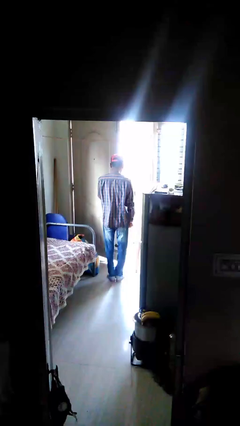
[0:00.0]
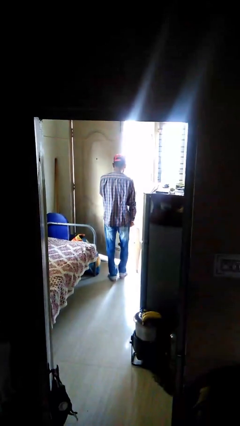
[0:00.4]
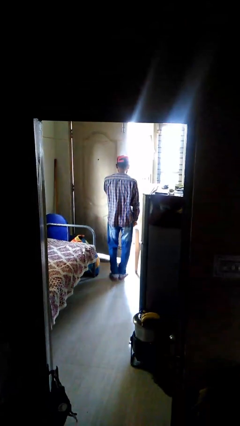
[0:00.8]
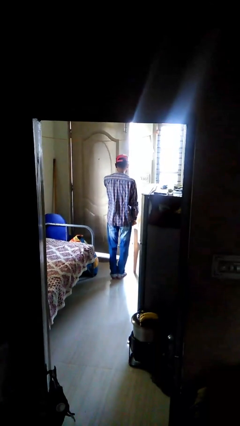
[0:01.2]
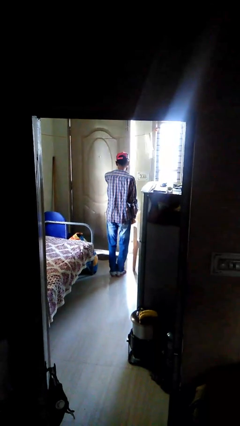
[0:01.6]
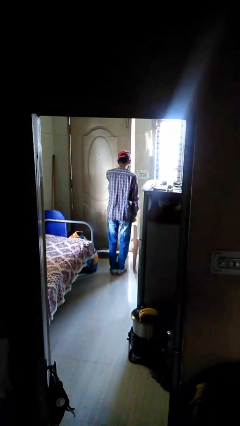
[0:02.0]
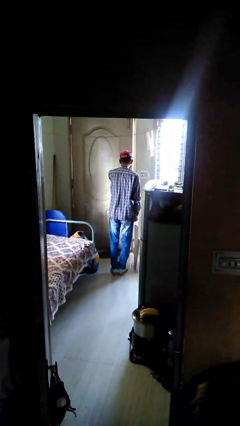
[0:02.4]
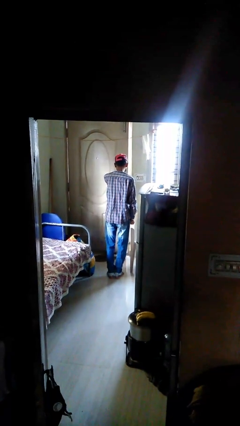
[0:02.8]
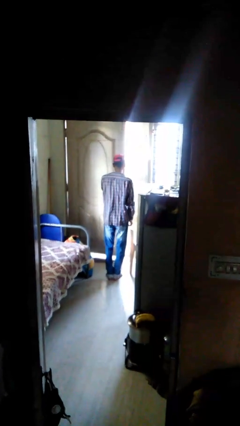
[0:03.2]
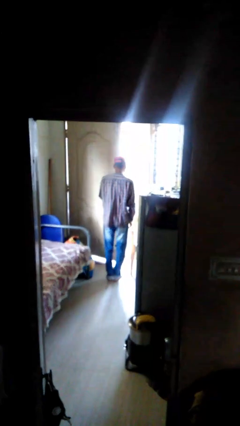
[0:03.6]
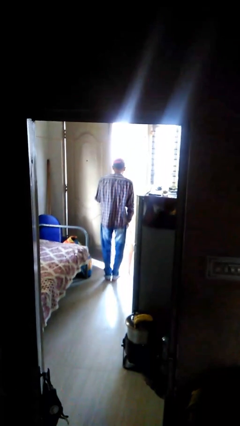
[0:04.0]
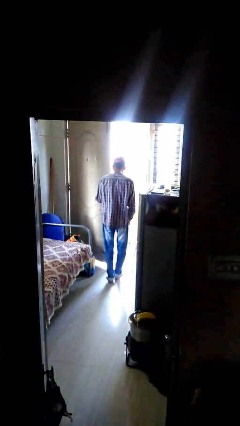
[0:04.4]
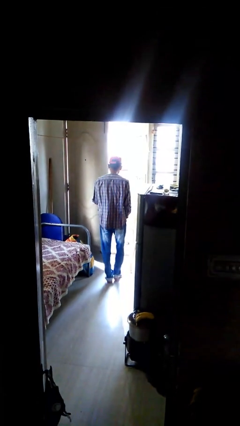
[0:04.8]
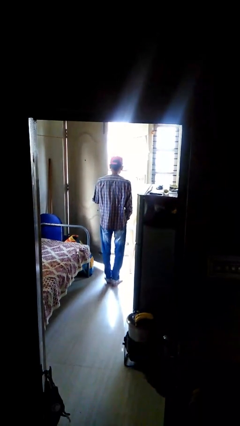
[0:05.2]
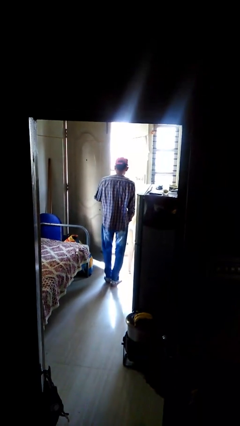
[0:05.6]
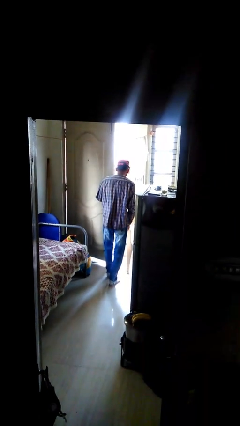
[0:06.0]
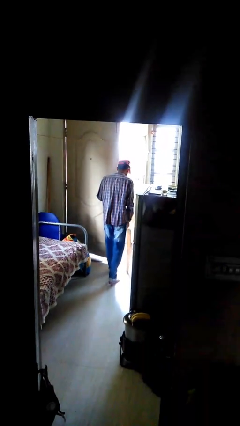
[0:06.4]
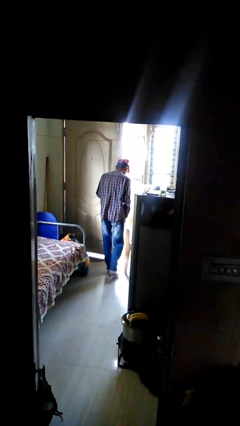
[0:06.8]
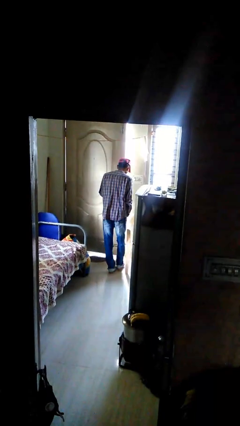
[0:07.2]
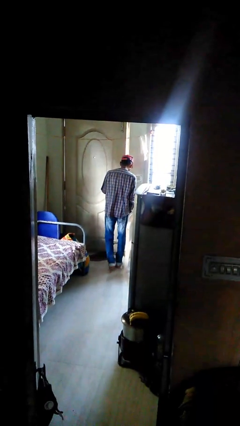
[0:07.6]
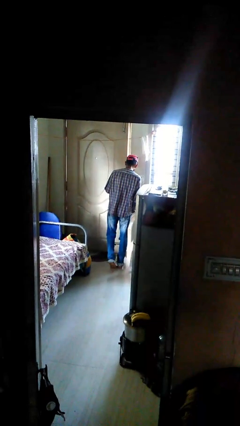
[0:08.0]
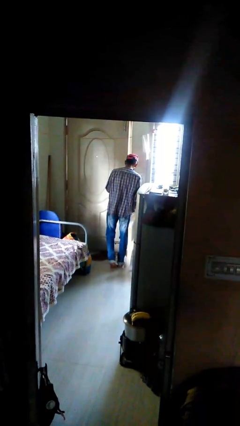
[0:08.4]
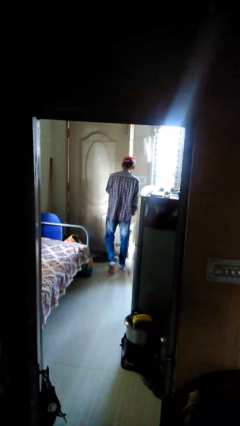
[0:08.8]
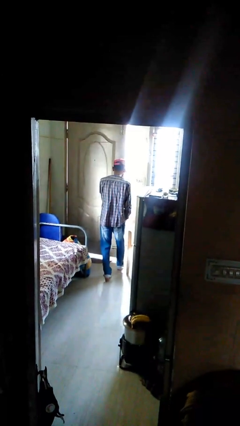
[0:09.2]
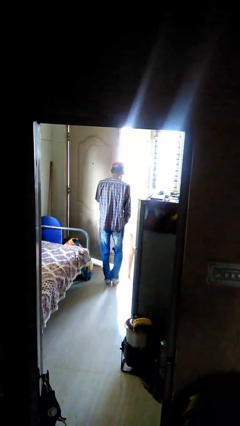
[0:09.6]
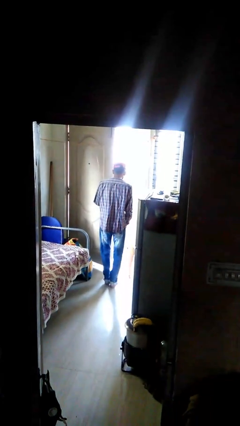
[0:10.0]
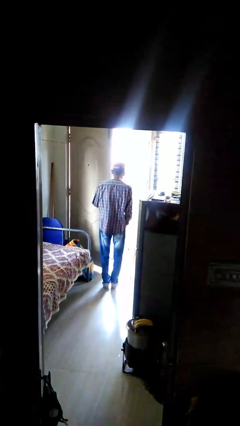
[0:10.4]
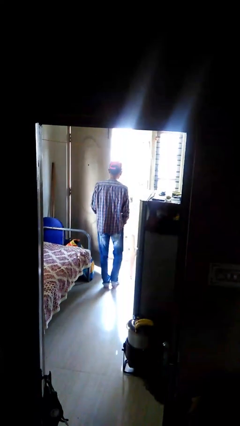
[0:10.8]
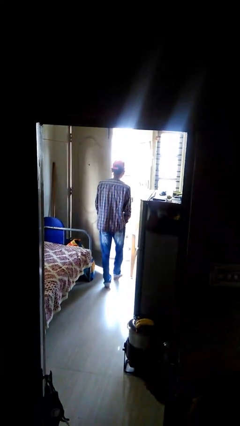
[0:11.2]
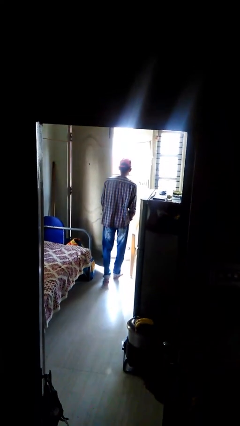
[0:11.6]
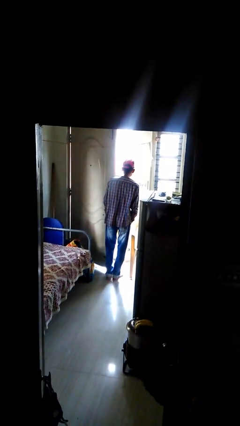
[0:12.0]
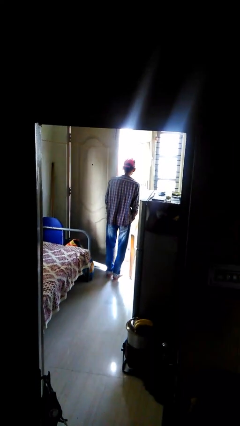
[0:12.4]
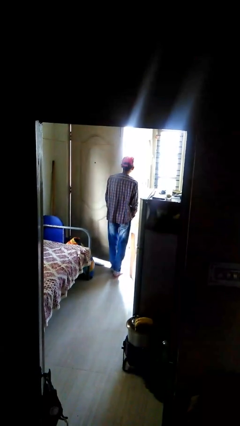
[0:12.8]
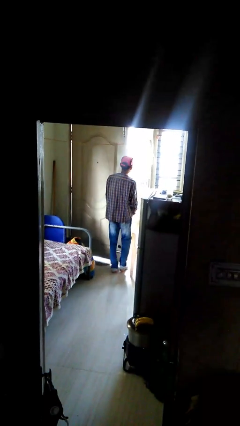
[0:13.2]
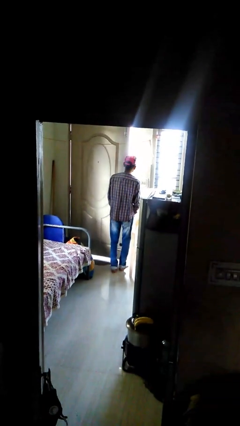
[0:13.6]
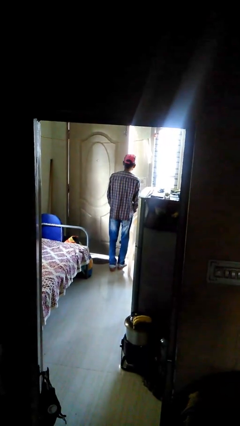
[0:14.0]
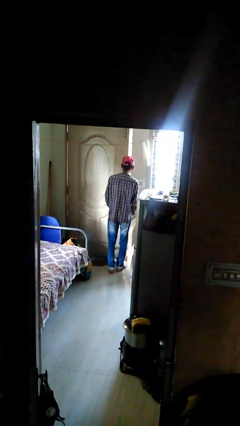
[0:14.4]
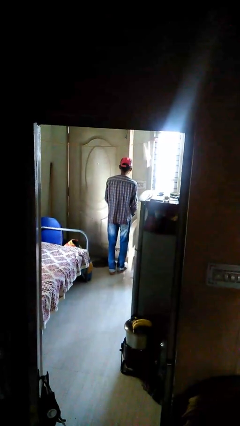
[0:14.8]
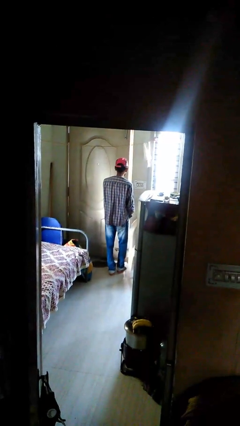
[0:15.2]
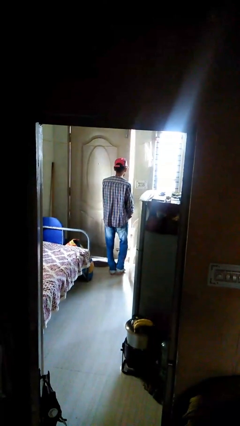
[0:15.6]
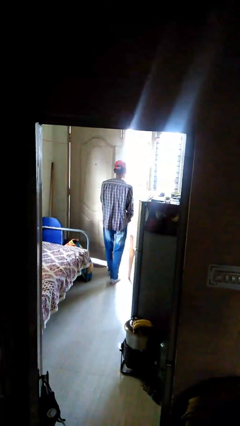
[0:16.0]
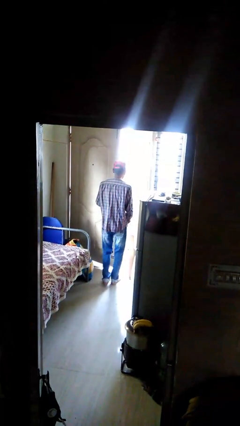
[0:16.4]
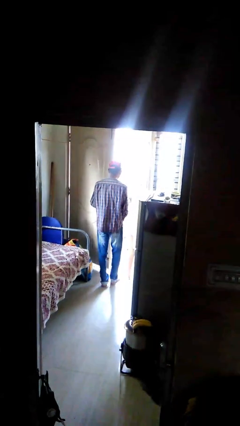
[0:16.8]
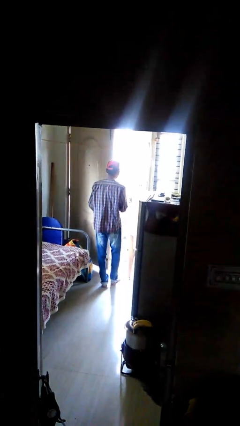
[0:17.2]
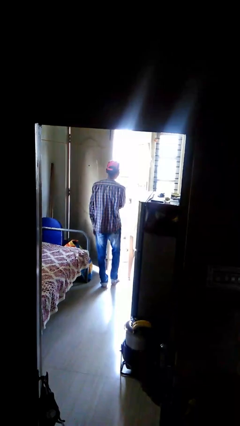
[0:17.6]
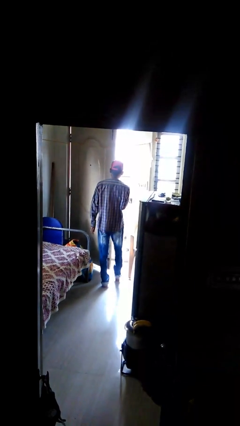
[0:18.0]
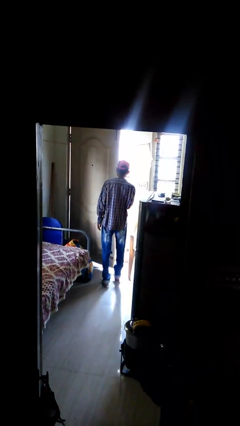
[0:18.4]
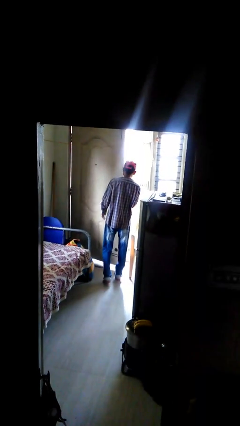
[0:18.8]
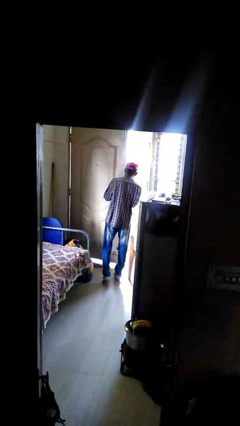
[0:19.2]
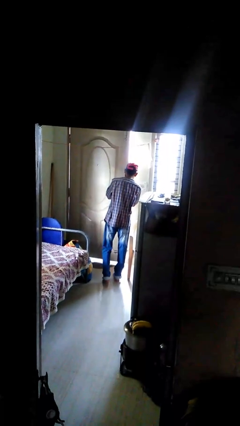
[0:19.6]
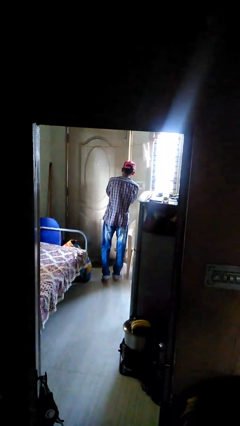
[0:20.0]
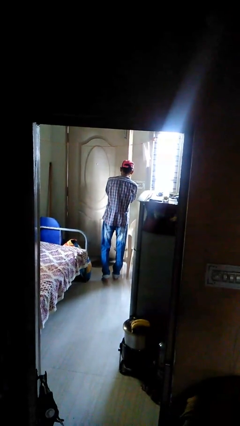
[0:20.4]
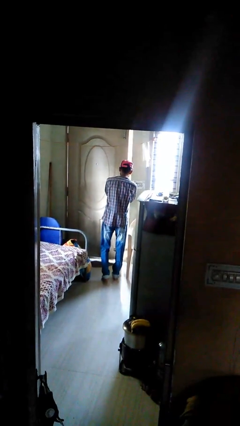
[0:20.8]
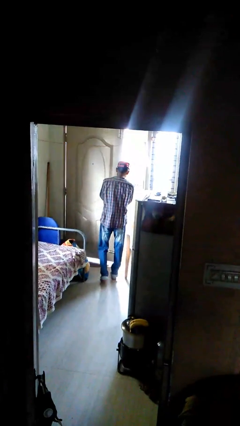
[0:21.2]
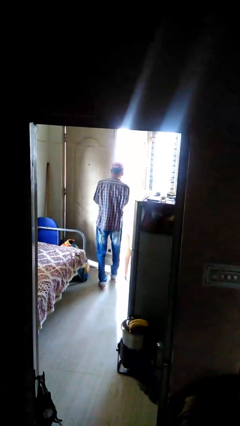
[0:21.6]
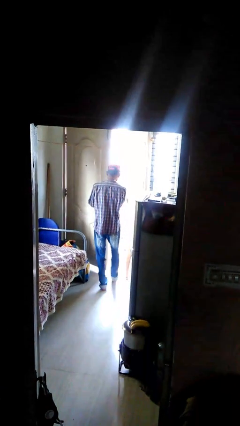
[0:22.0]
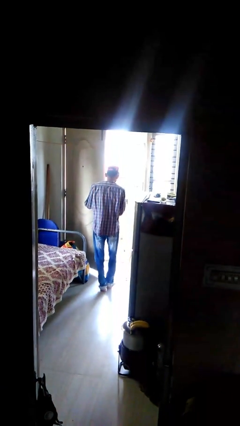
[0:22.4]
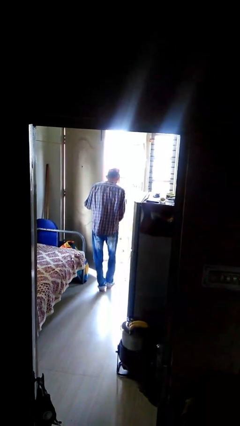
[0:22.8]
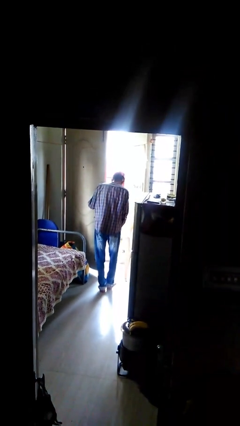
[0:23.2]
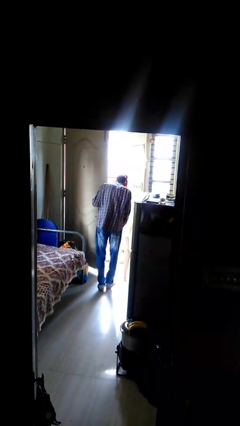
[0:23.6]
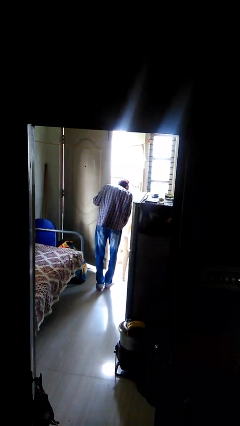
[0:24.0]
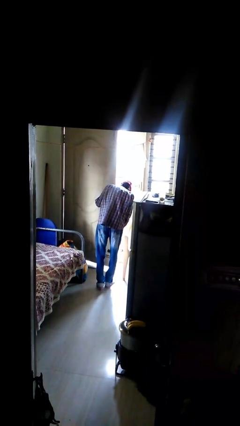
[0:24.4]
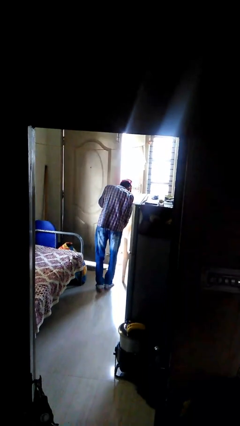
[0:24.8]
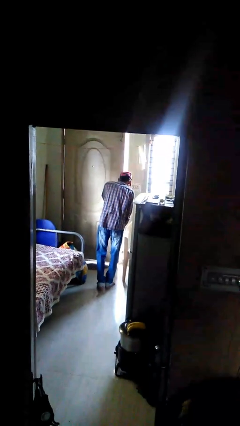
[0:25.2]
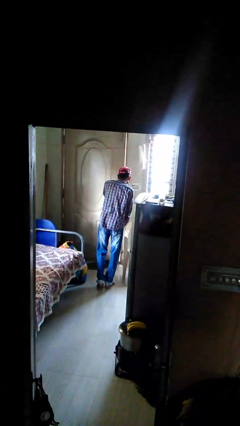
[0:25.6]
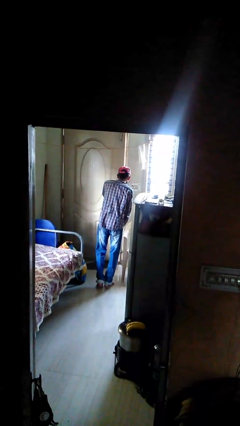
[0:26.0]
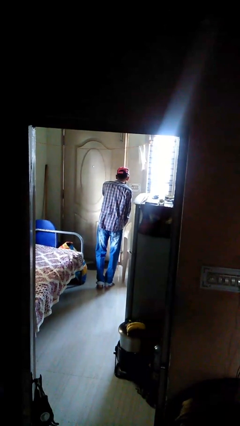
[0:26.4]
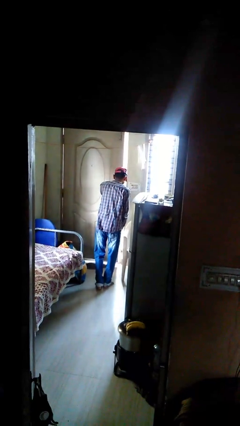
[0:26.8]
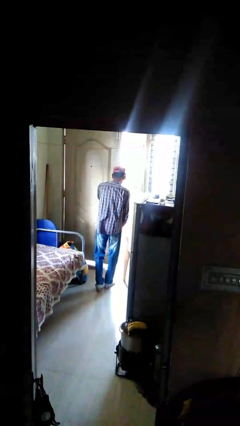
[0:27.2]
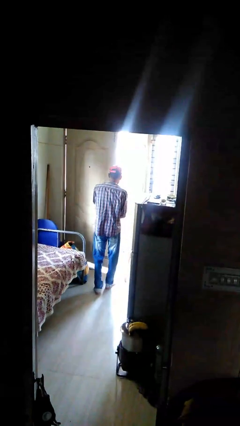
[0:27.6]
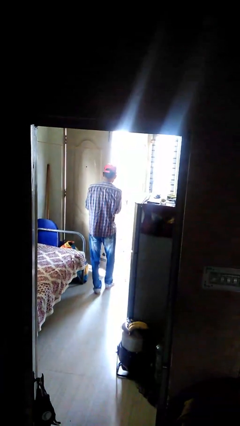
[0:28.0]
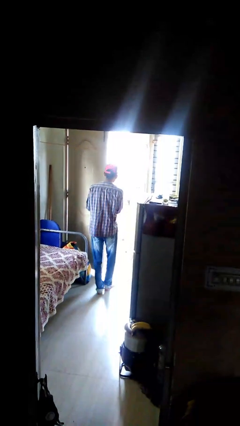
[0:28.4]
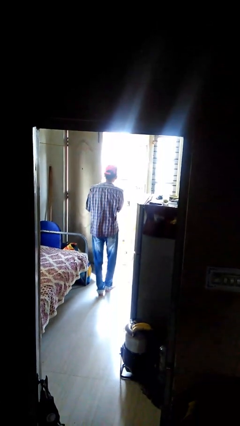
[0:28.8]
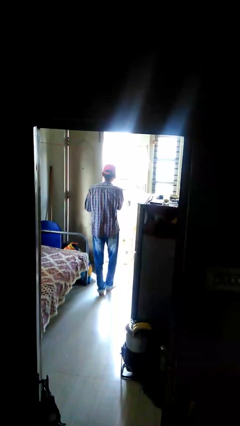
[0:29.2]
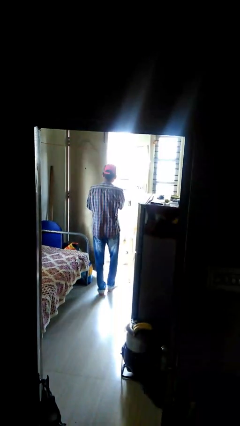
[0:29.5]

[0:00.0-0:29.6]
person closes facility door

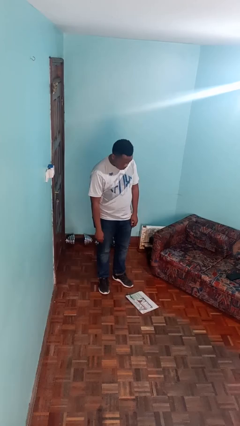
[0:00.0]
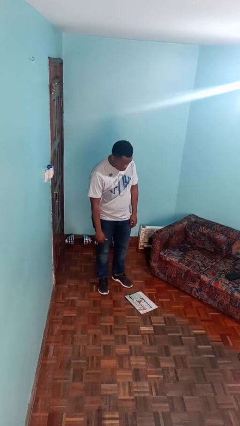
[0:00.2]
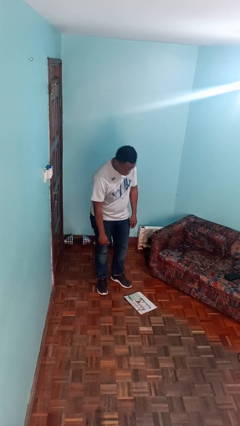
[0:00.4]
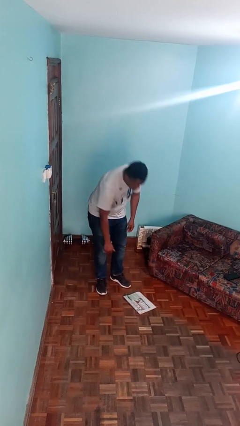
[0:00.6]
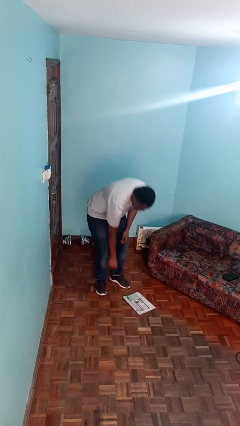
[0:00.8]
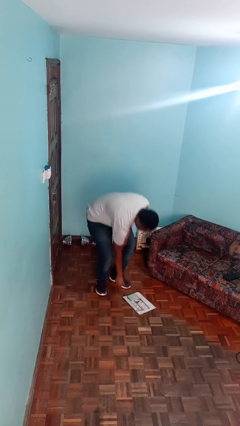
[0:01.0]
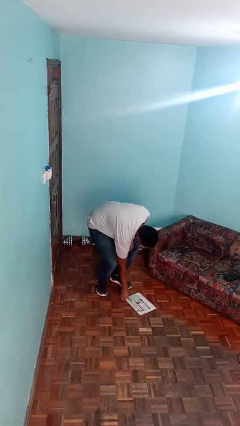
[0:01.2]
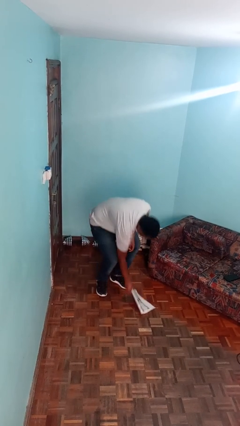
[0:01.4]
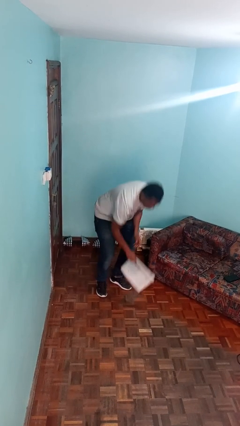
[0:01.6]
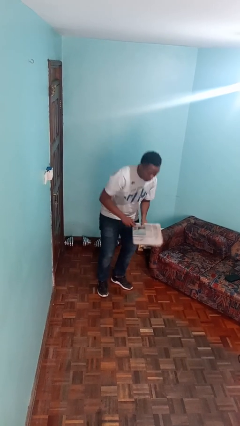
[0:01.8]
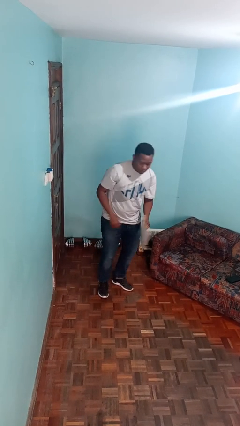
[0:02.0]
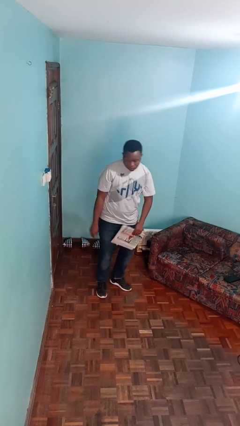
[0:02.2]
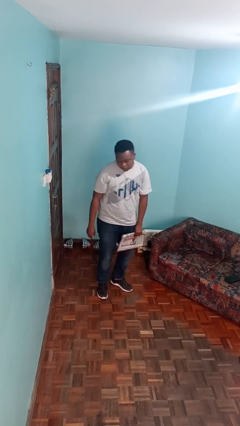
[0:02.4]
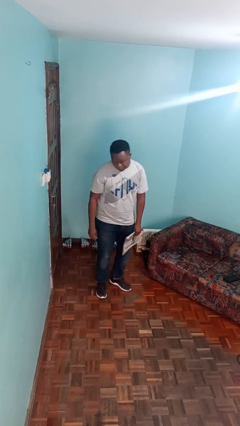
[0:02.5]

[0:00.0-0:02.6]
person picks up object from floor

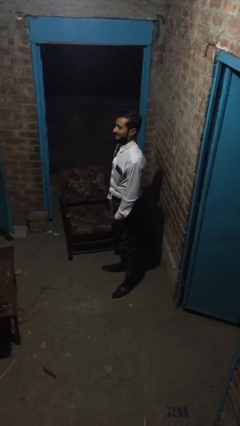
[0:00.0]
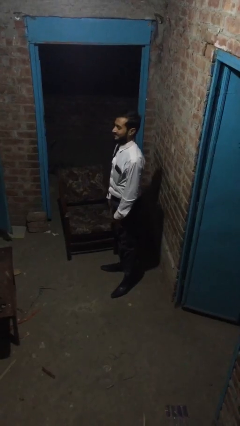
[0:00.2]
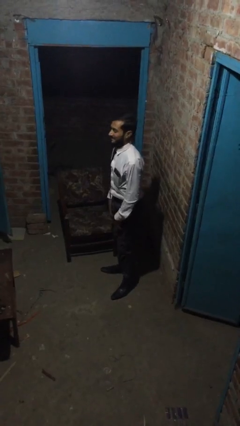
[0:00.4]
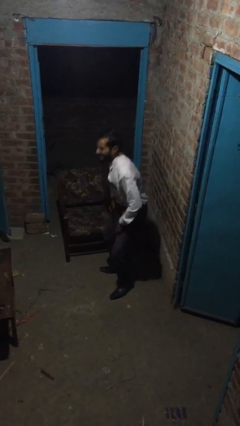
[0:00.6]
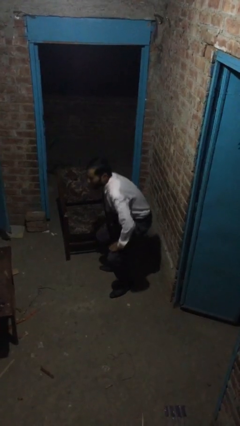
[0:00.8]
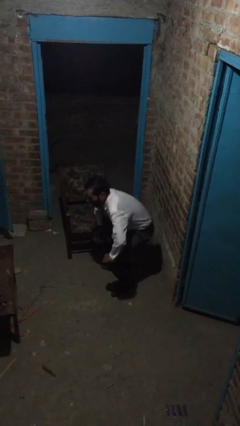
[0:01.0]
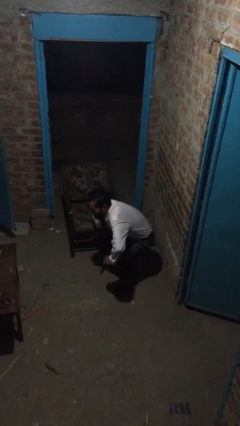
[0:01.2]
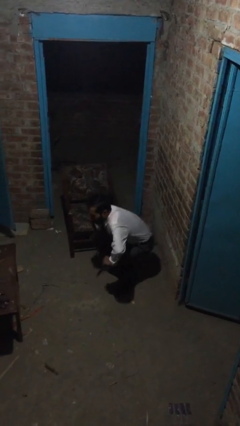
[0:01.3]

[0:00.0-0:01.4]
person sits down
